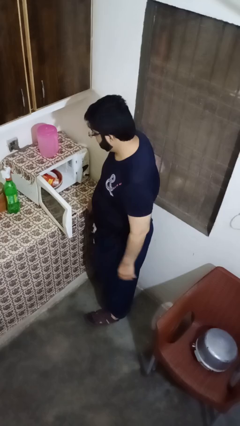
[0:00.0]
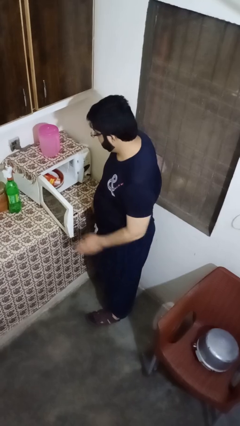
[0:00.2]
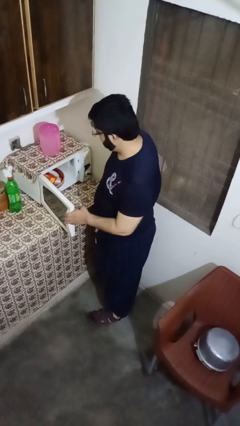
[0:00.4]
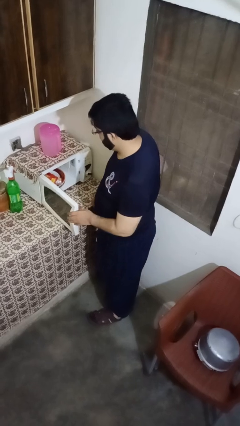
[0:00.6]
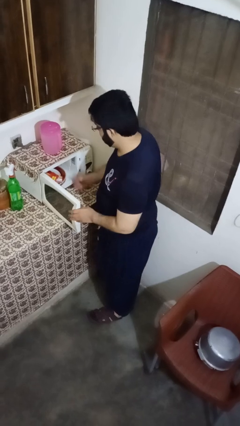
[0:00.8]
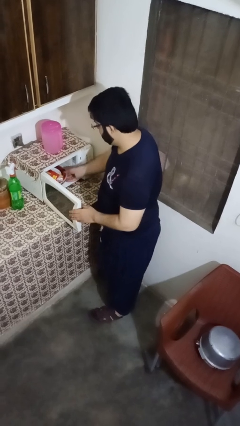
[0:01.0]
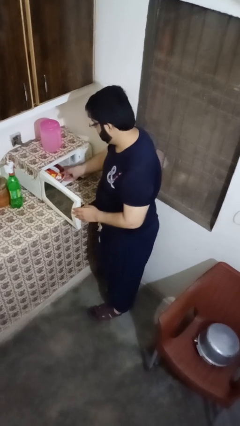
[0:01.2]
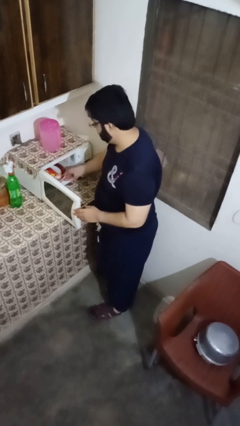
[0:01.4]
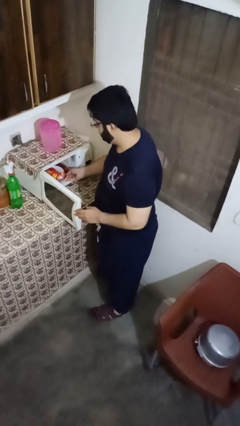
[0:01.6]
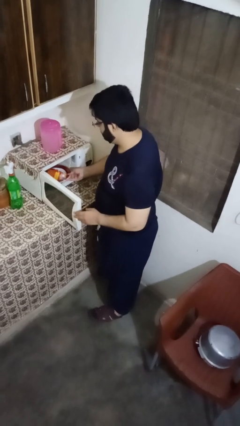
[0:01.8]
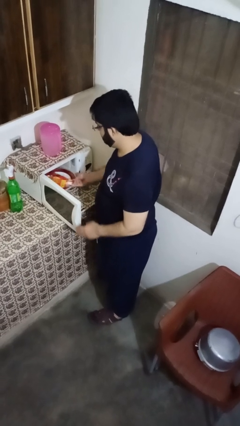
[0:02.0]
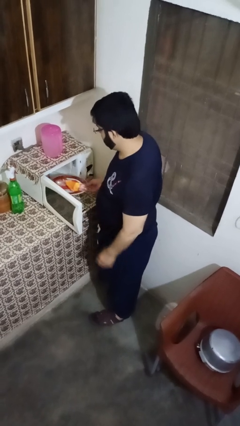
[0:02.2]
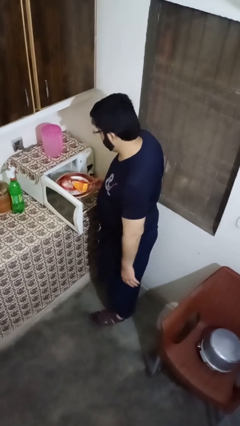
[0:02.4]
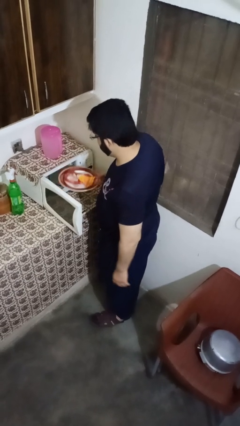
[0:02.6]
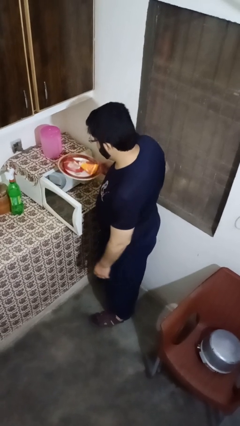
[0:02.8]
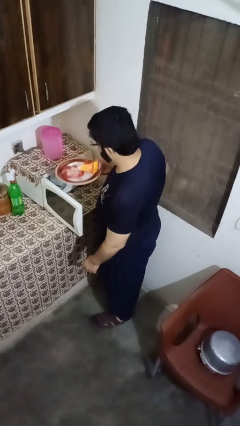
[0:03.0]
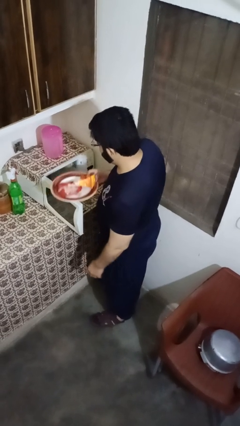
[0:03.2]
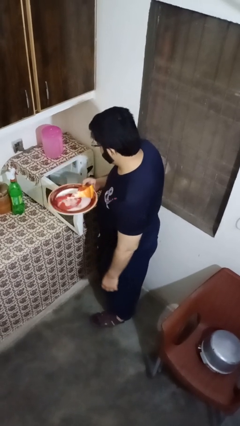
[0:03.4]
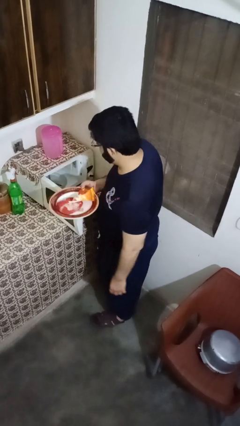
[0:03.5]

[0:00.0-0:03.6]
person takes object from oven

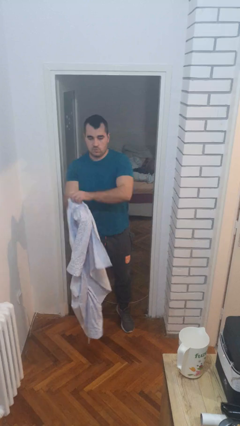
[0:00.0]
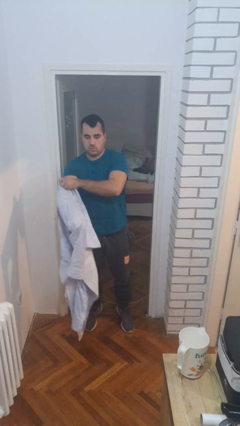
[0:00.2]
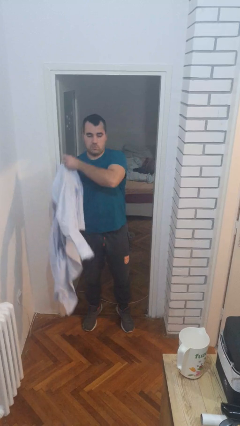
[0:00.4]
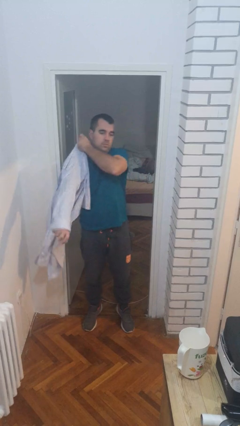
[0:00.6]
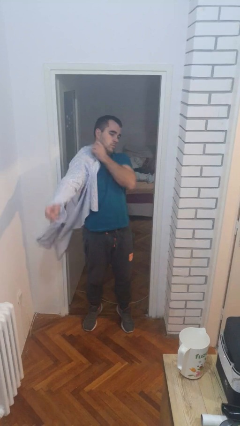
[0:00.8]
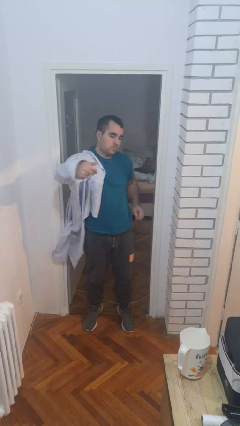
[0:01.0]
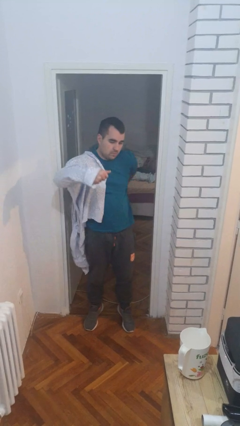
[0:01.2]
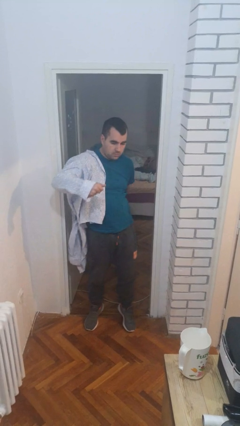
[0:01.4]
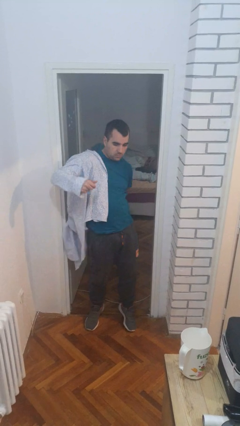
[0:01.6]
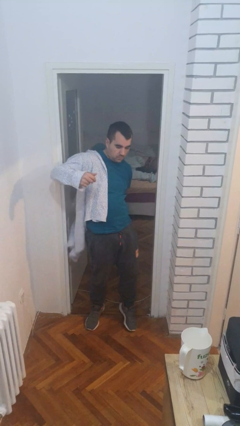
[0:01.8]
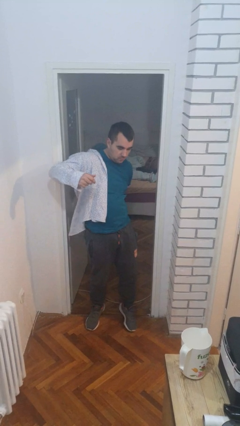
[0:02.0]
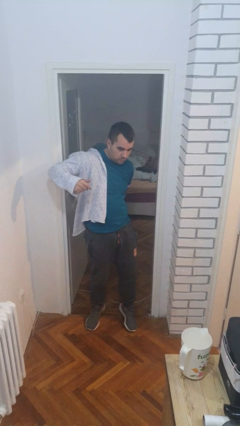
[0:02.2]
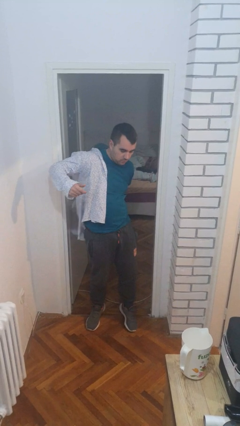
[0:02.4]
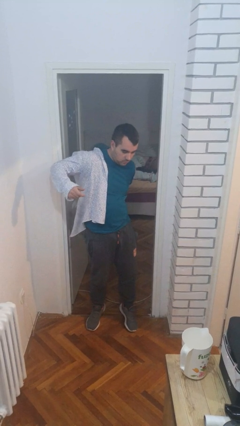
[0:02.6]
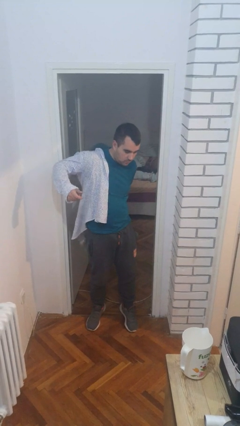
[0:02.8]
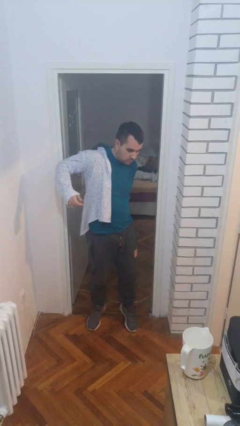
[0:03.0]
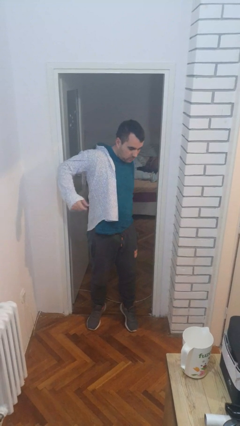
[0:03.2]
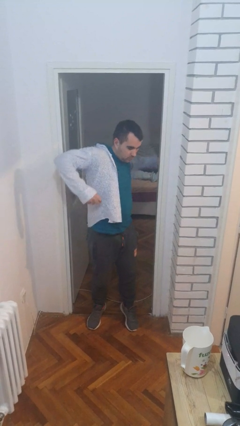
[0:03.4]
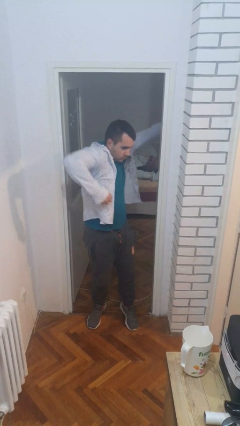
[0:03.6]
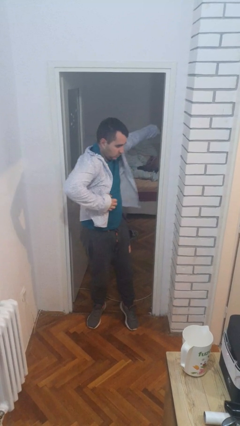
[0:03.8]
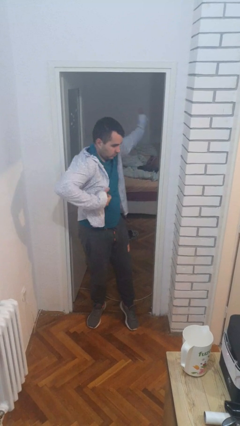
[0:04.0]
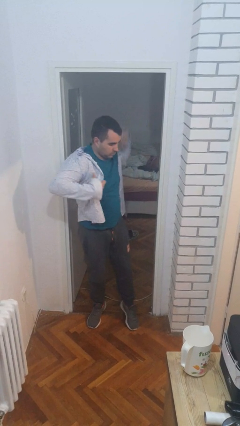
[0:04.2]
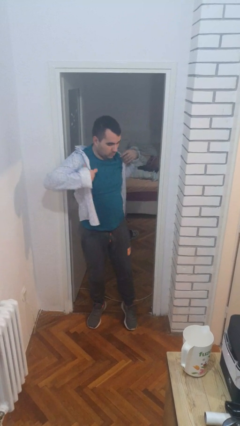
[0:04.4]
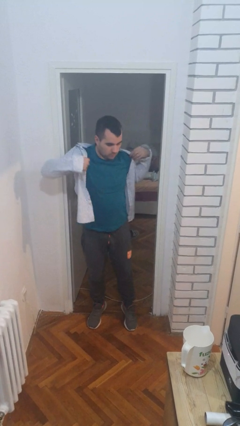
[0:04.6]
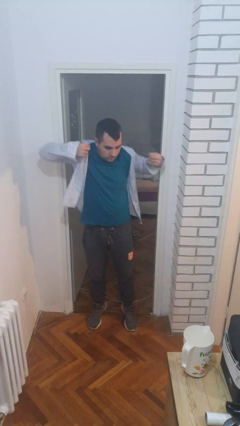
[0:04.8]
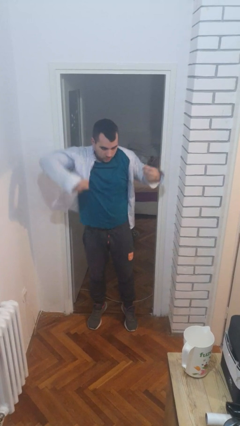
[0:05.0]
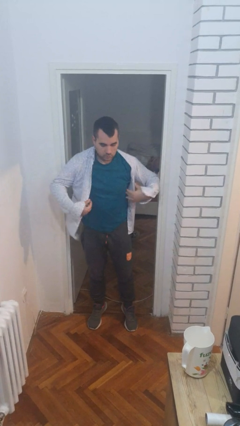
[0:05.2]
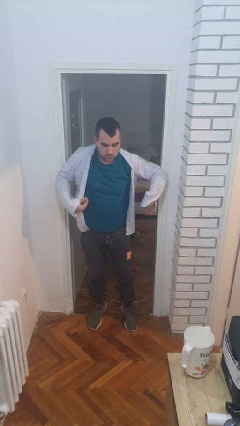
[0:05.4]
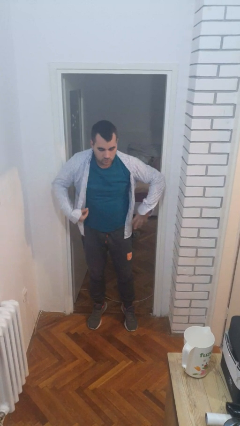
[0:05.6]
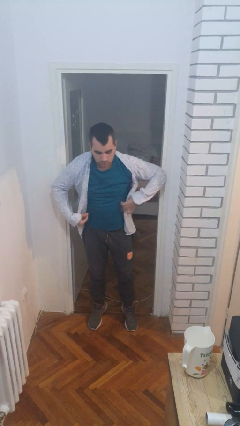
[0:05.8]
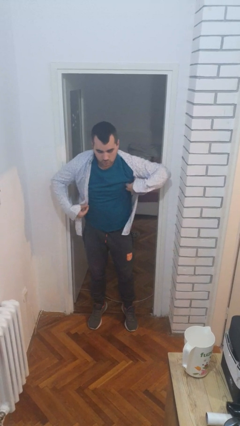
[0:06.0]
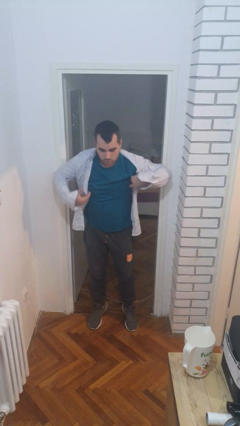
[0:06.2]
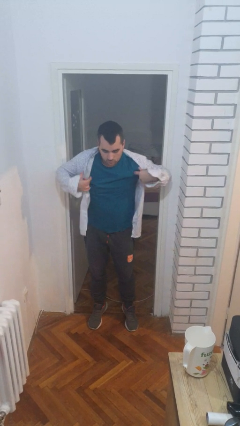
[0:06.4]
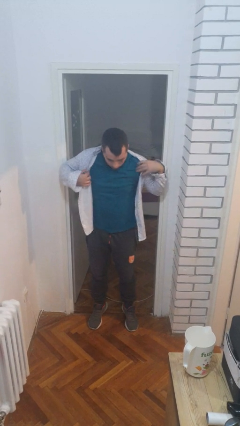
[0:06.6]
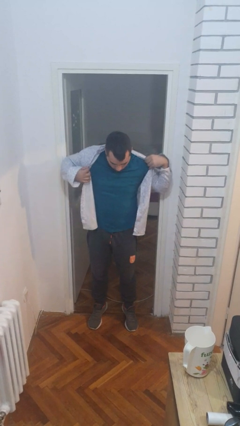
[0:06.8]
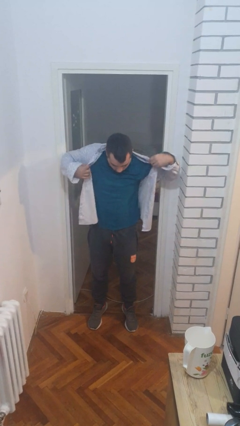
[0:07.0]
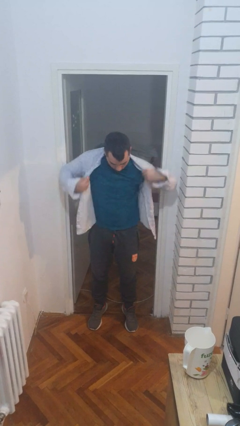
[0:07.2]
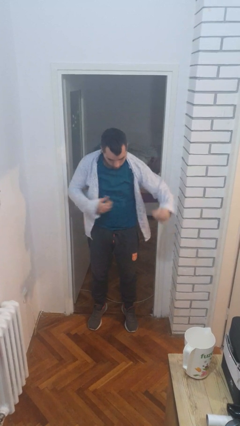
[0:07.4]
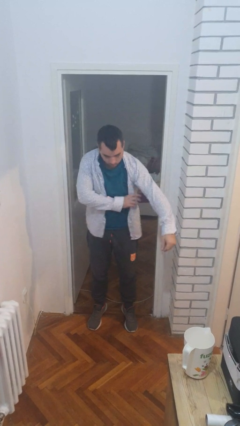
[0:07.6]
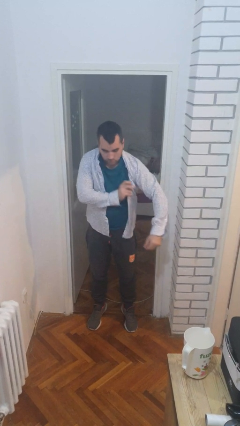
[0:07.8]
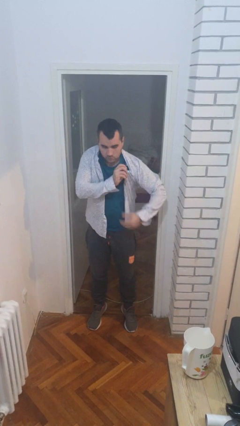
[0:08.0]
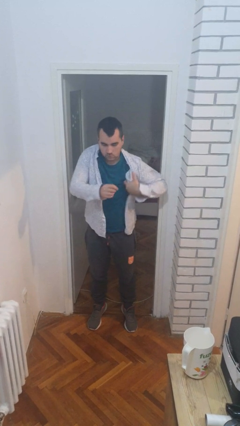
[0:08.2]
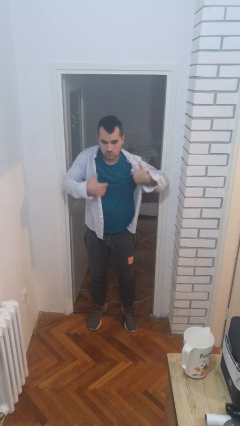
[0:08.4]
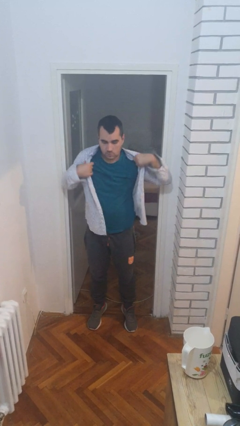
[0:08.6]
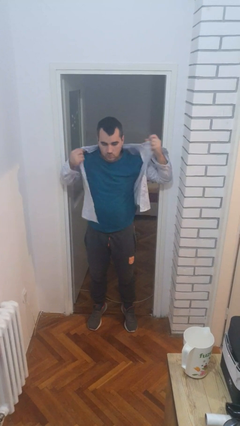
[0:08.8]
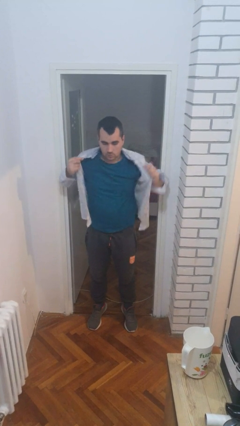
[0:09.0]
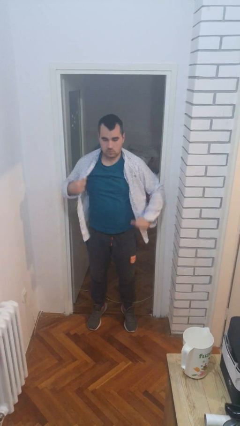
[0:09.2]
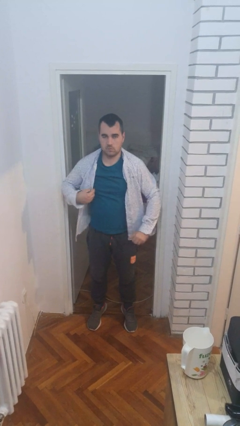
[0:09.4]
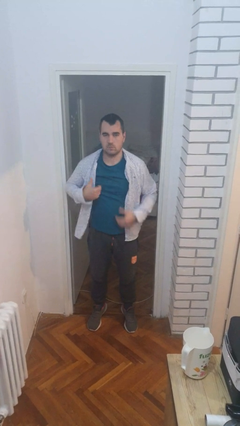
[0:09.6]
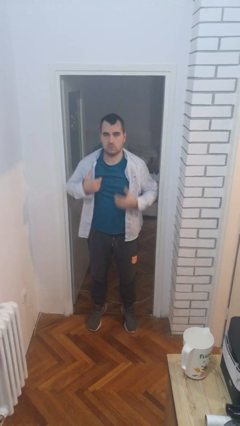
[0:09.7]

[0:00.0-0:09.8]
person puts on shirt

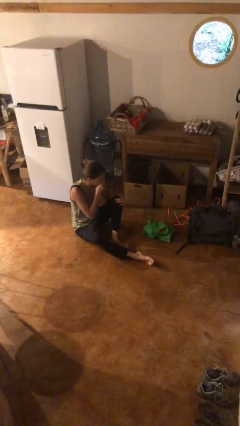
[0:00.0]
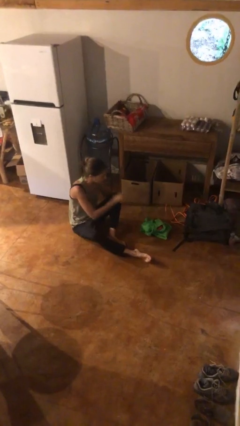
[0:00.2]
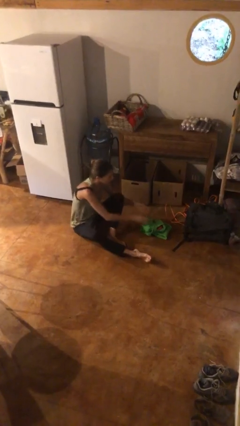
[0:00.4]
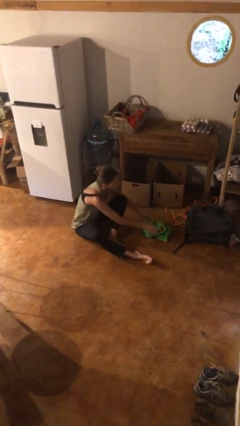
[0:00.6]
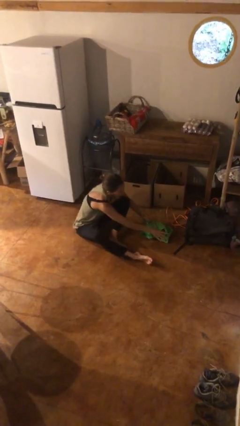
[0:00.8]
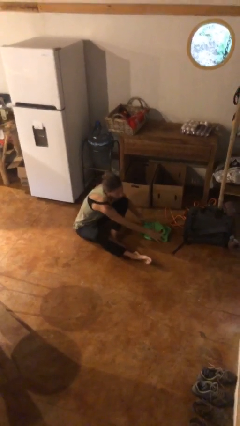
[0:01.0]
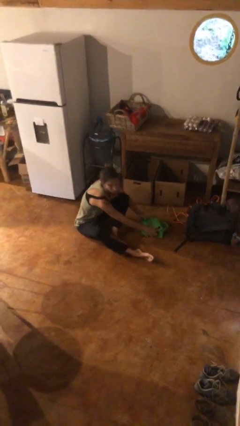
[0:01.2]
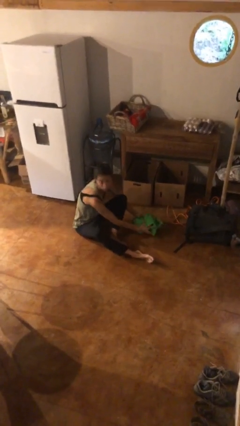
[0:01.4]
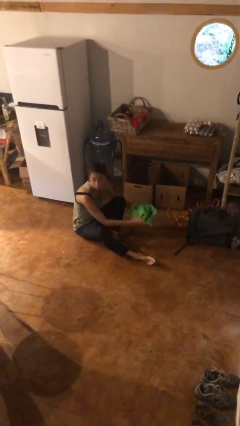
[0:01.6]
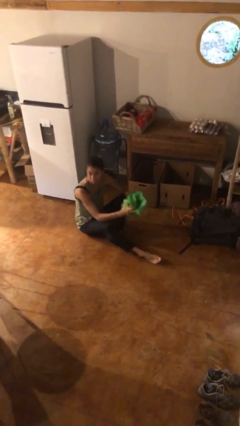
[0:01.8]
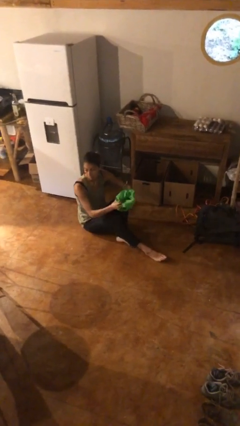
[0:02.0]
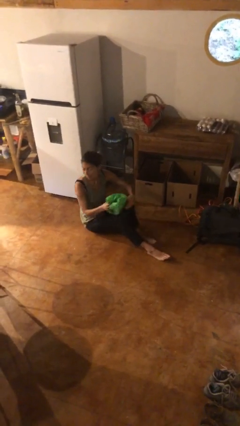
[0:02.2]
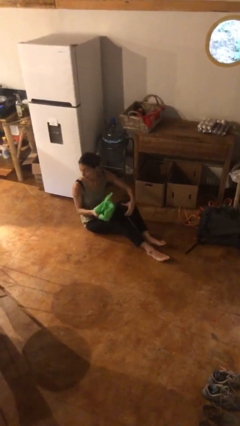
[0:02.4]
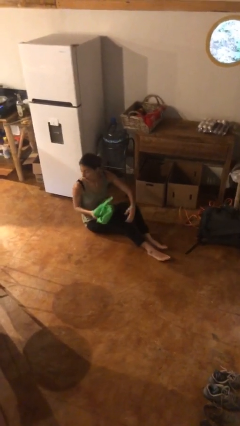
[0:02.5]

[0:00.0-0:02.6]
person picks up object from floor

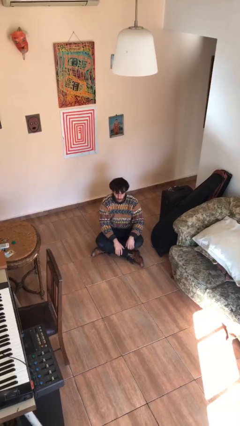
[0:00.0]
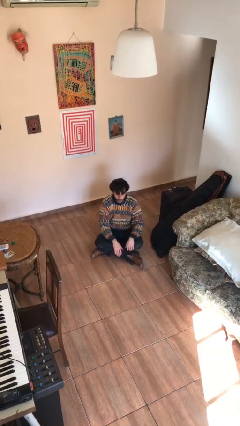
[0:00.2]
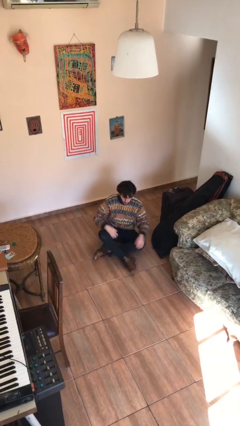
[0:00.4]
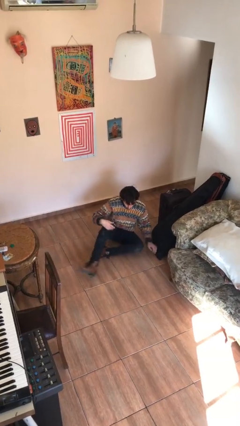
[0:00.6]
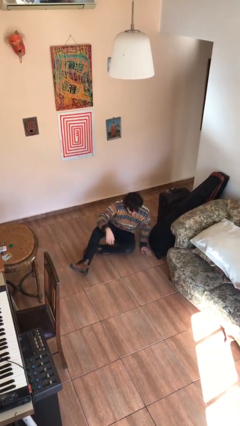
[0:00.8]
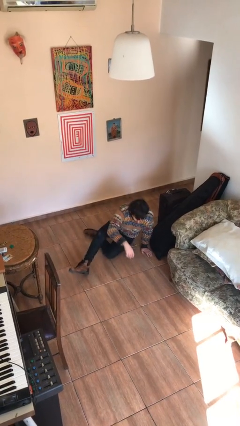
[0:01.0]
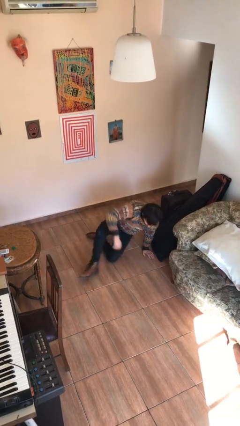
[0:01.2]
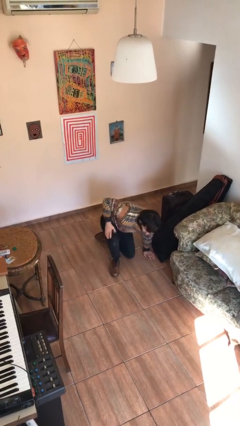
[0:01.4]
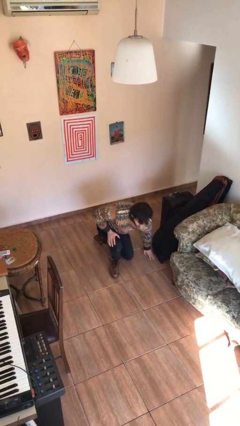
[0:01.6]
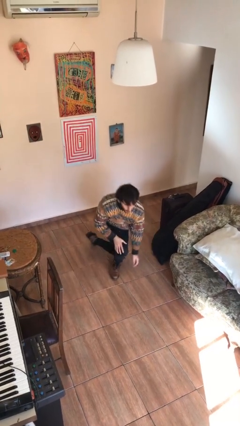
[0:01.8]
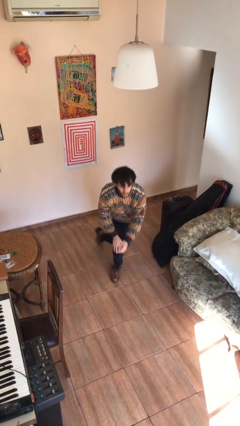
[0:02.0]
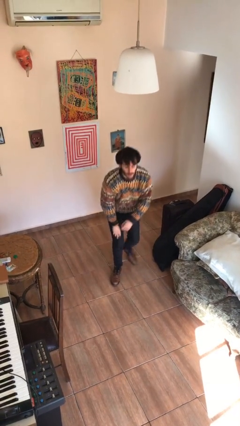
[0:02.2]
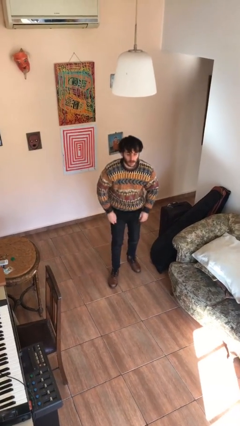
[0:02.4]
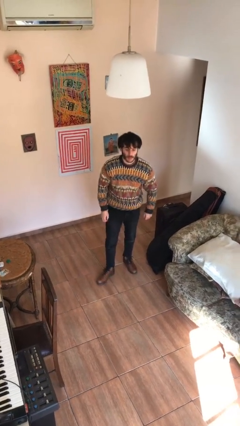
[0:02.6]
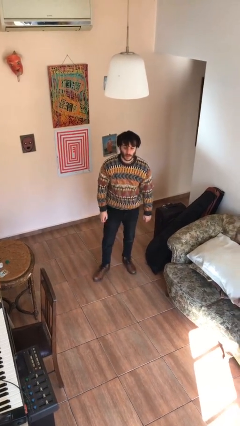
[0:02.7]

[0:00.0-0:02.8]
person stands up from floor
